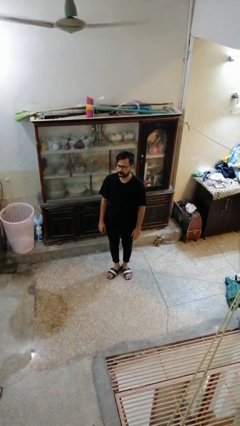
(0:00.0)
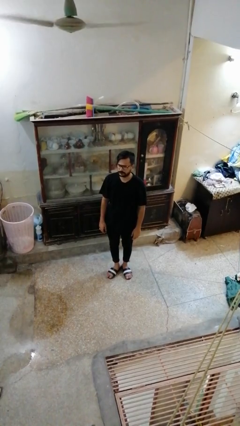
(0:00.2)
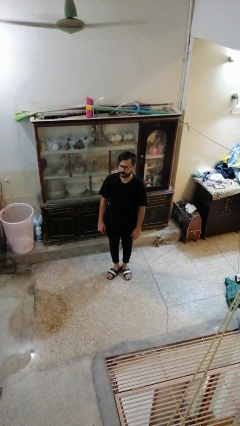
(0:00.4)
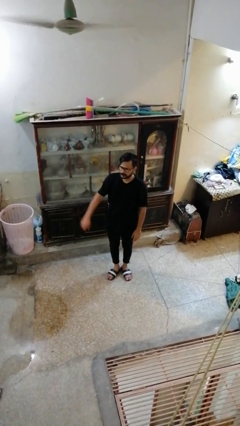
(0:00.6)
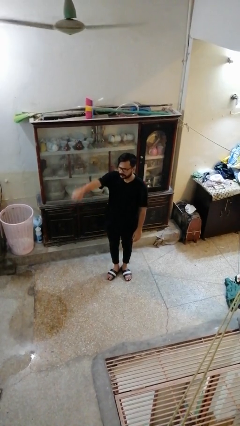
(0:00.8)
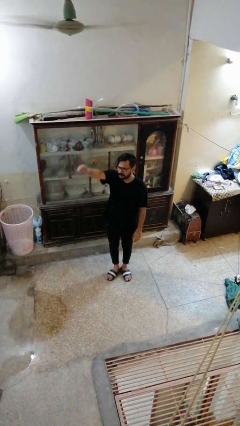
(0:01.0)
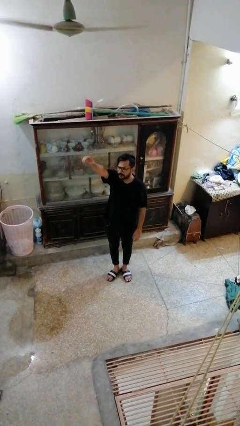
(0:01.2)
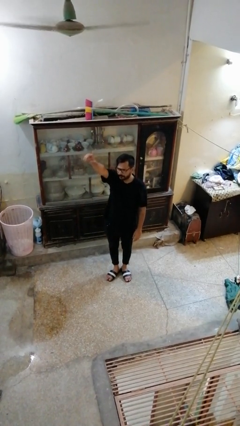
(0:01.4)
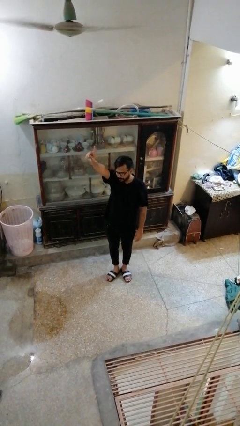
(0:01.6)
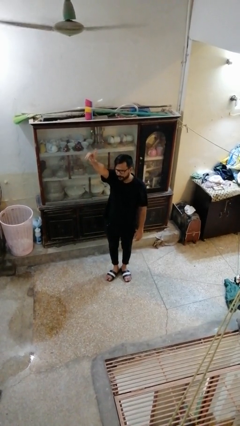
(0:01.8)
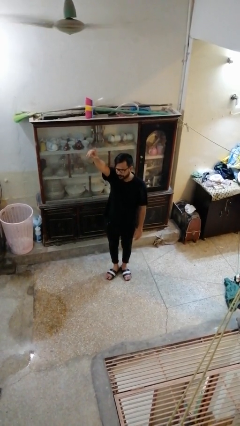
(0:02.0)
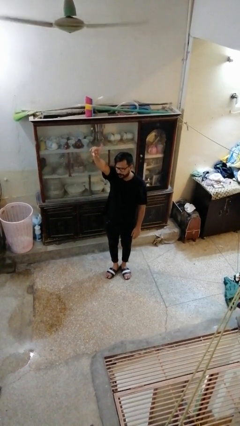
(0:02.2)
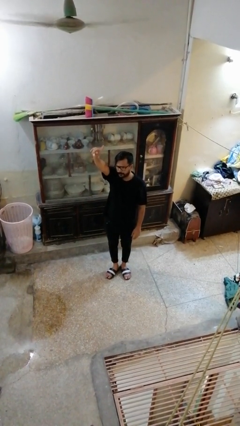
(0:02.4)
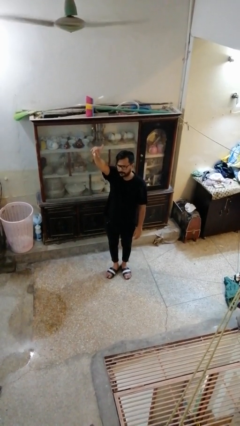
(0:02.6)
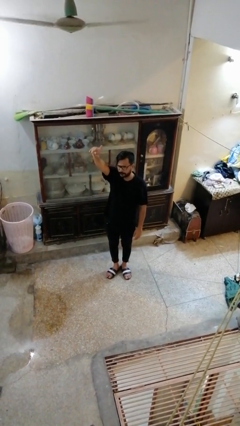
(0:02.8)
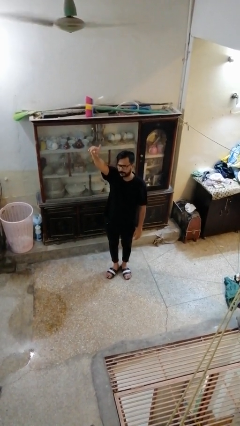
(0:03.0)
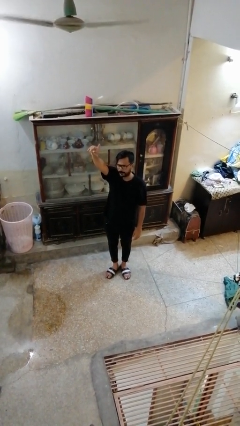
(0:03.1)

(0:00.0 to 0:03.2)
person gestures raise hand

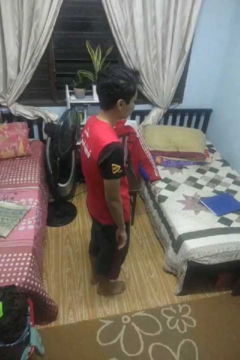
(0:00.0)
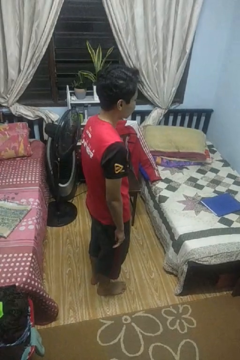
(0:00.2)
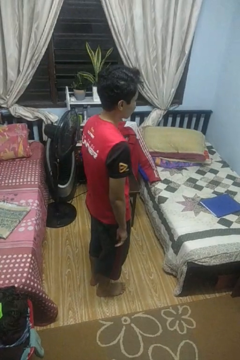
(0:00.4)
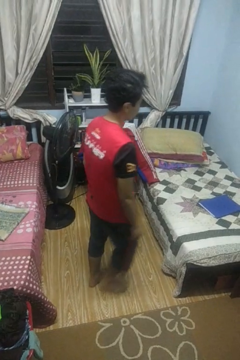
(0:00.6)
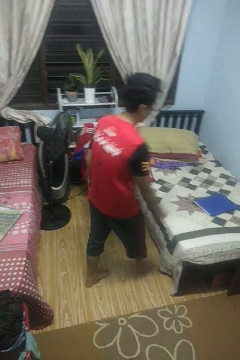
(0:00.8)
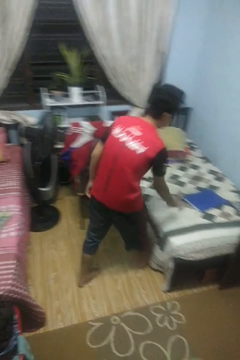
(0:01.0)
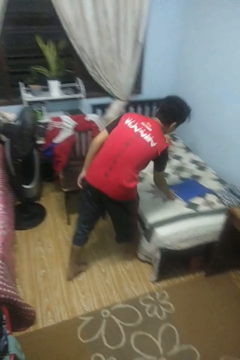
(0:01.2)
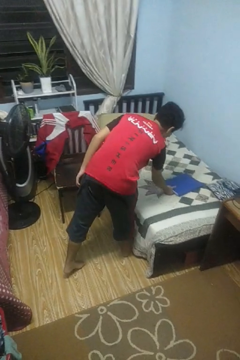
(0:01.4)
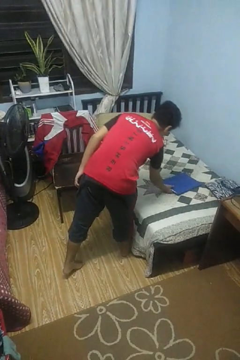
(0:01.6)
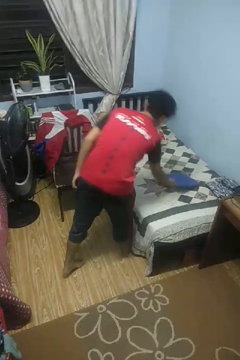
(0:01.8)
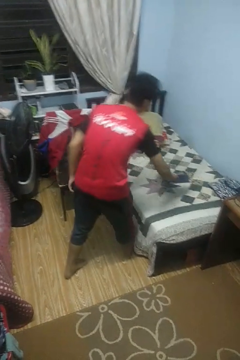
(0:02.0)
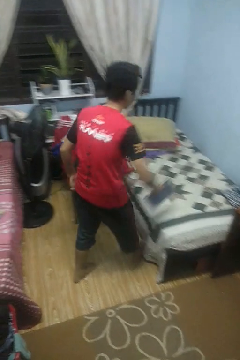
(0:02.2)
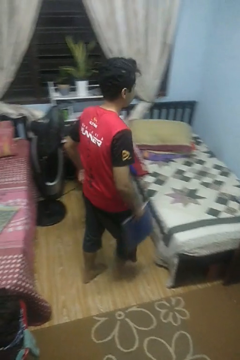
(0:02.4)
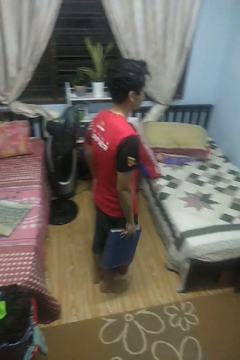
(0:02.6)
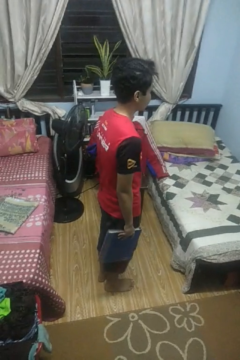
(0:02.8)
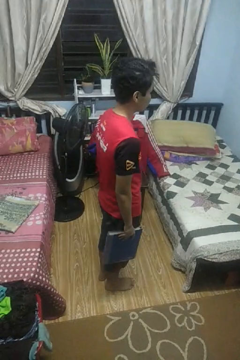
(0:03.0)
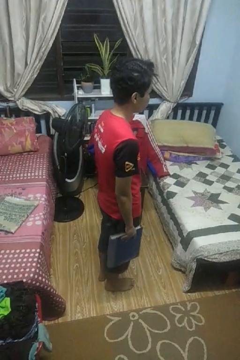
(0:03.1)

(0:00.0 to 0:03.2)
person picks up object from bed

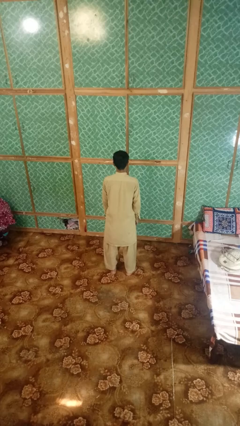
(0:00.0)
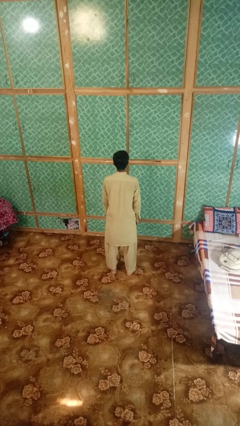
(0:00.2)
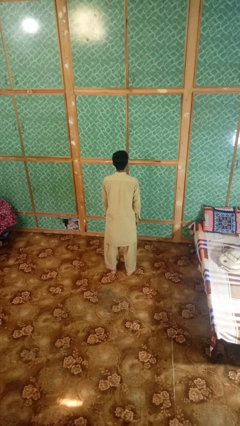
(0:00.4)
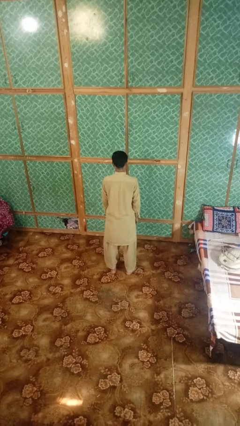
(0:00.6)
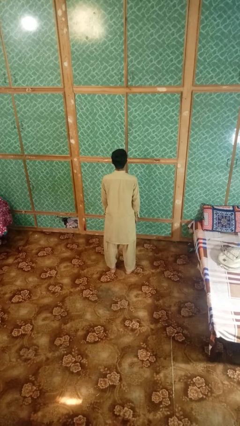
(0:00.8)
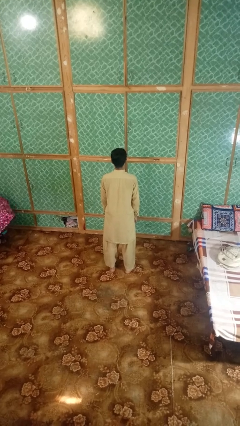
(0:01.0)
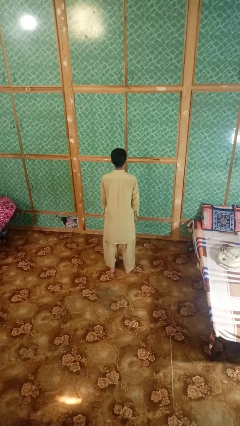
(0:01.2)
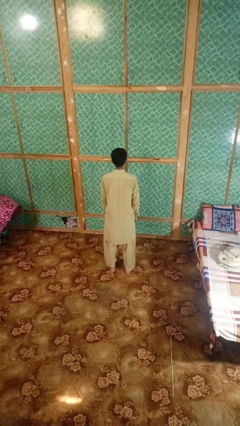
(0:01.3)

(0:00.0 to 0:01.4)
person shakes head

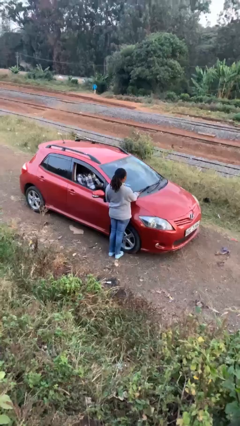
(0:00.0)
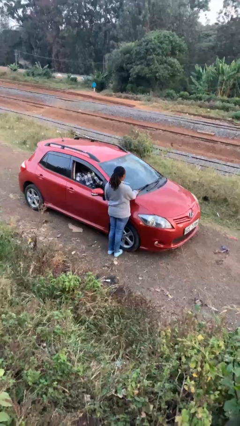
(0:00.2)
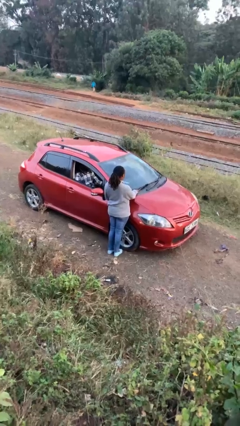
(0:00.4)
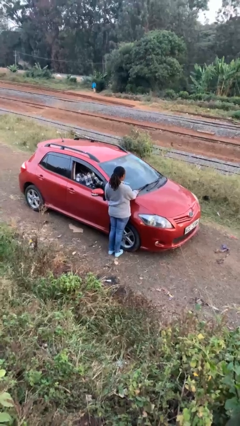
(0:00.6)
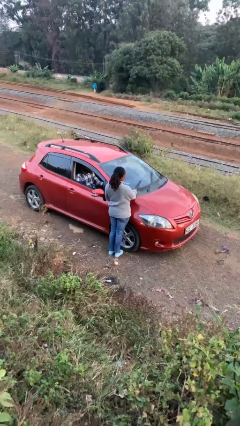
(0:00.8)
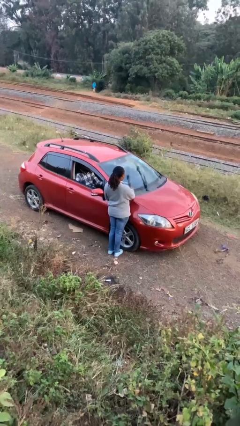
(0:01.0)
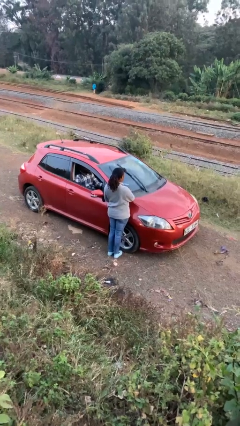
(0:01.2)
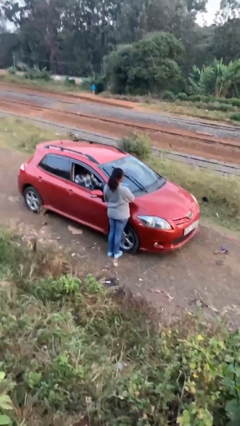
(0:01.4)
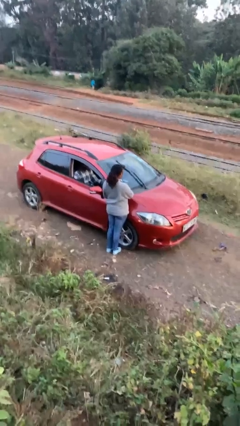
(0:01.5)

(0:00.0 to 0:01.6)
person flips up car wipers

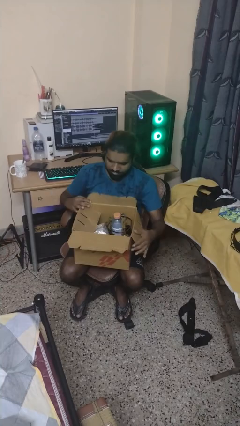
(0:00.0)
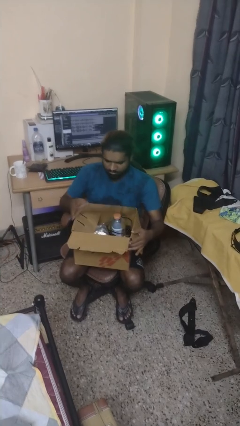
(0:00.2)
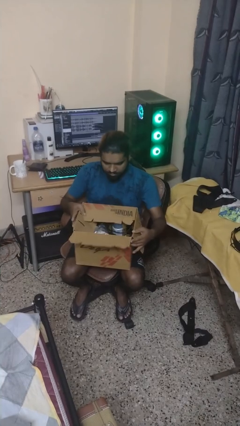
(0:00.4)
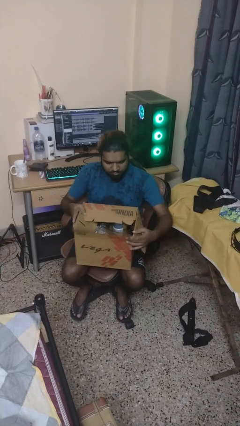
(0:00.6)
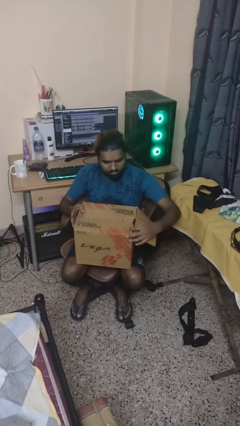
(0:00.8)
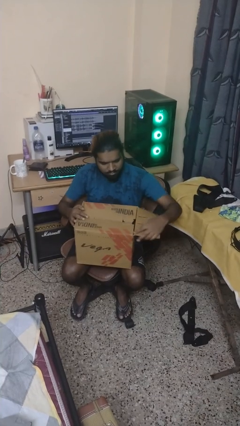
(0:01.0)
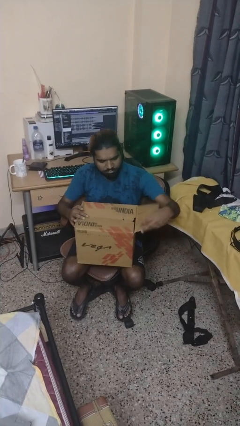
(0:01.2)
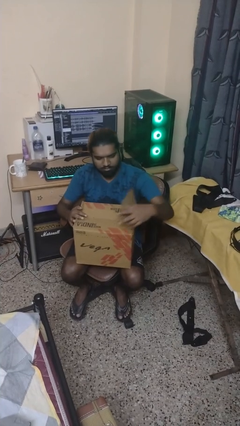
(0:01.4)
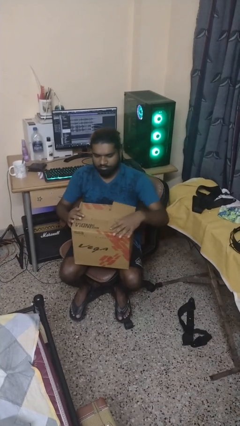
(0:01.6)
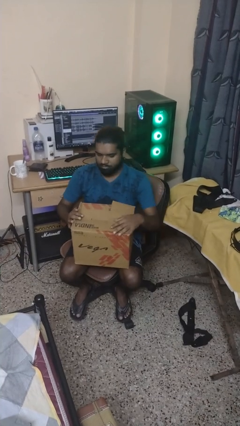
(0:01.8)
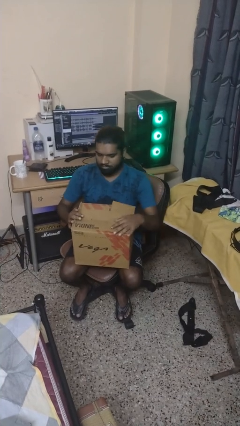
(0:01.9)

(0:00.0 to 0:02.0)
person closes box

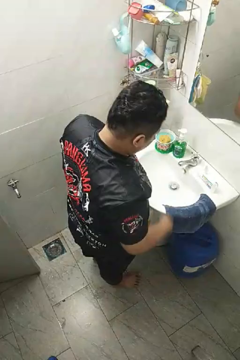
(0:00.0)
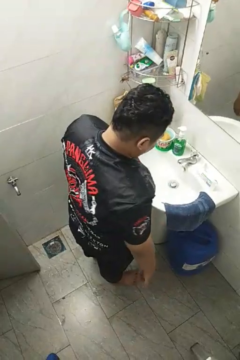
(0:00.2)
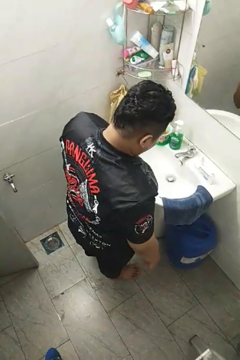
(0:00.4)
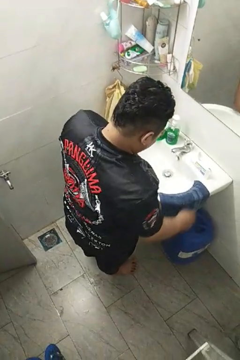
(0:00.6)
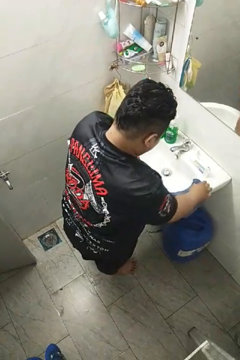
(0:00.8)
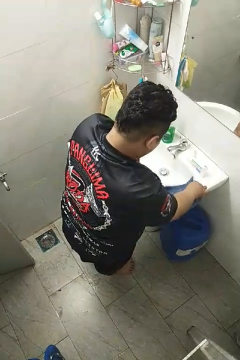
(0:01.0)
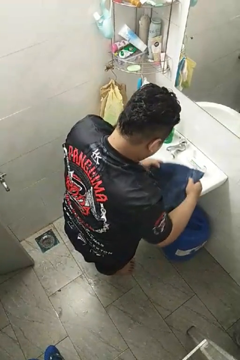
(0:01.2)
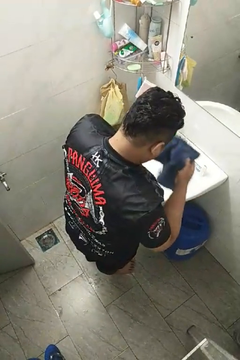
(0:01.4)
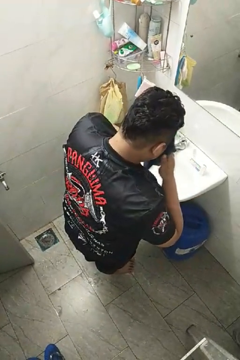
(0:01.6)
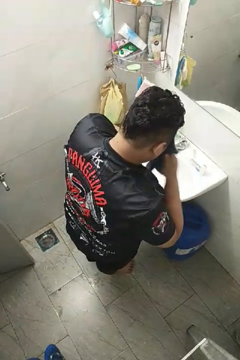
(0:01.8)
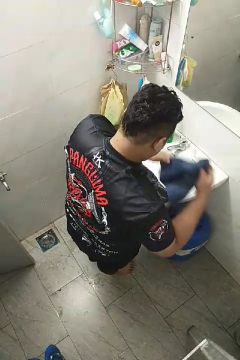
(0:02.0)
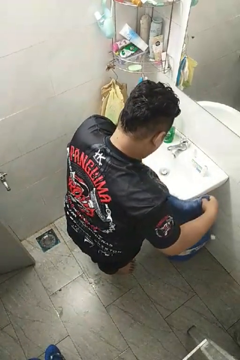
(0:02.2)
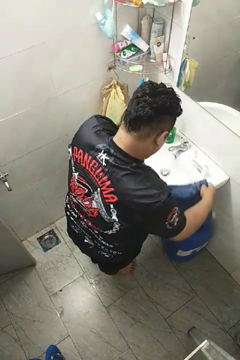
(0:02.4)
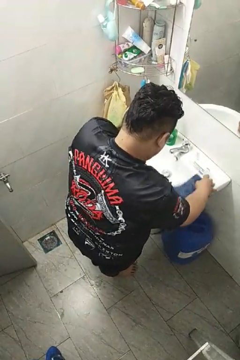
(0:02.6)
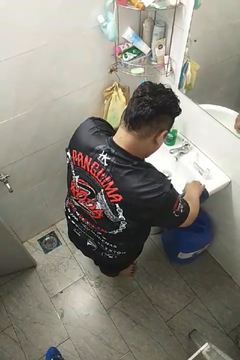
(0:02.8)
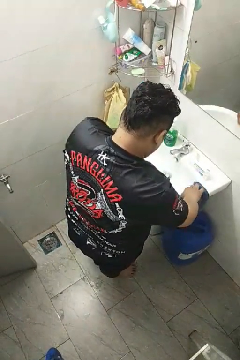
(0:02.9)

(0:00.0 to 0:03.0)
person dries face with towel

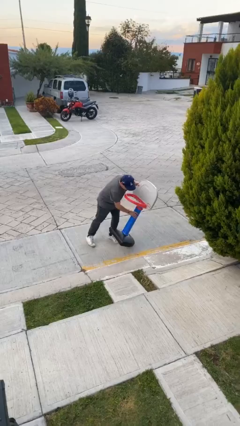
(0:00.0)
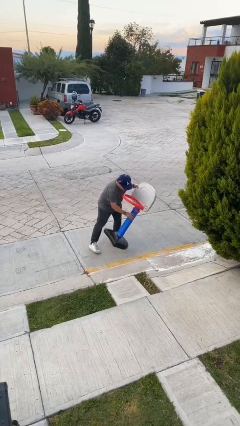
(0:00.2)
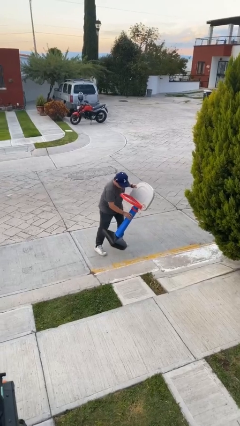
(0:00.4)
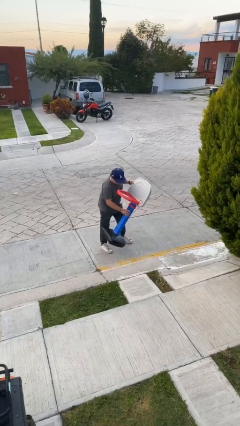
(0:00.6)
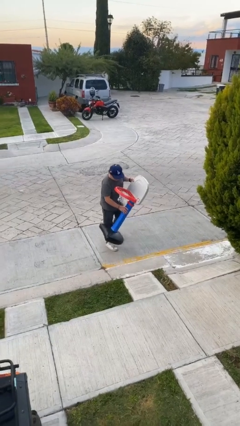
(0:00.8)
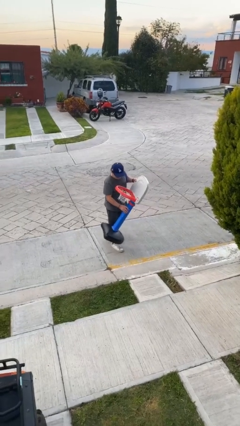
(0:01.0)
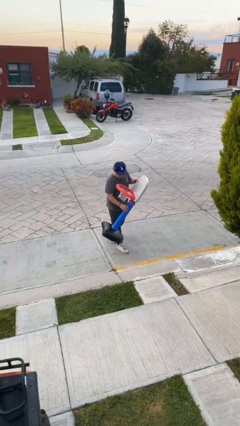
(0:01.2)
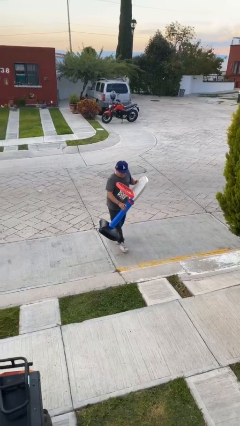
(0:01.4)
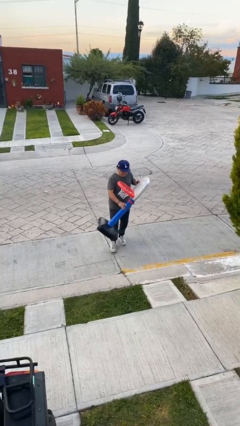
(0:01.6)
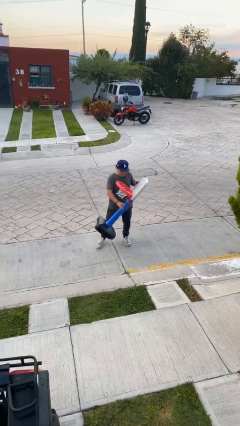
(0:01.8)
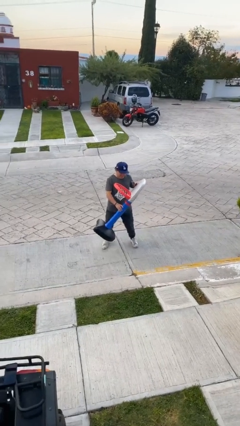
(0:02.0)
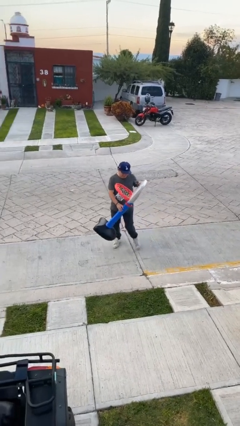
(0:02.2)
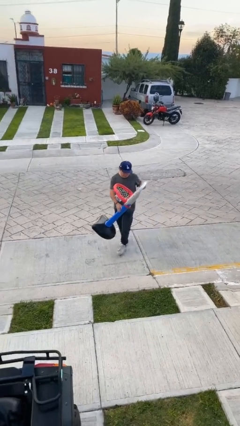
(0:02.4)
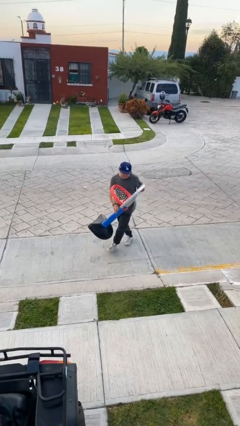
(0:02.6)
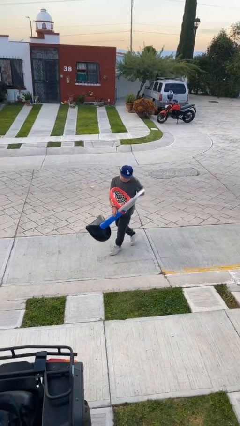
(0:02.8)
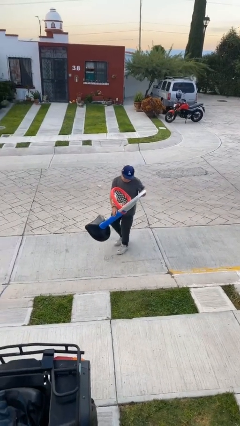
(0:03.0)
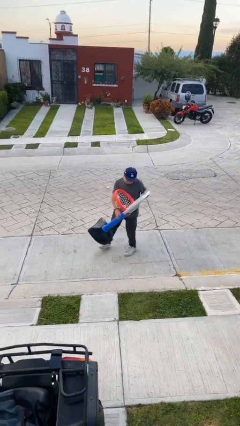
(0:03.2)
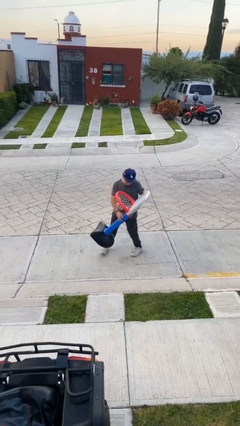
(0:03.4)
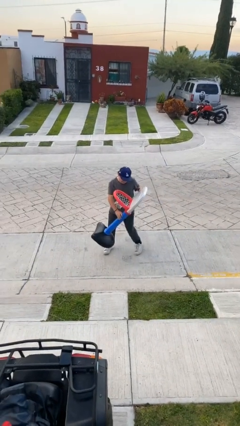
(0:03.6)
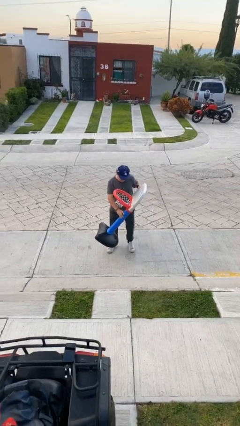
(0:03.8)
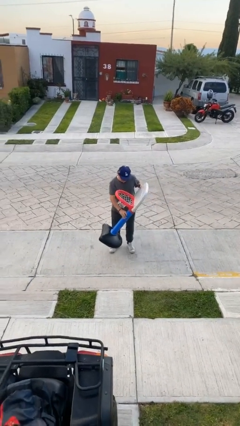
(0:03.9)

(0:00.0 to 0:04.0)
person carries heavy object
